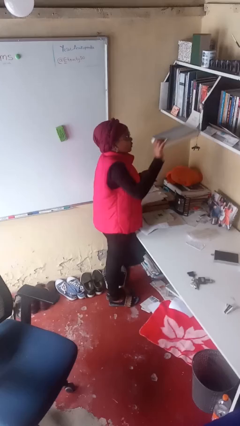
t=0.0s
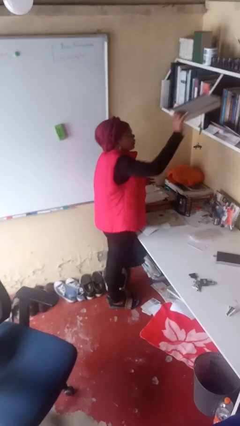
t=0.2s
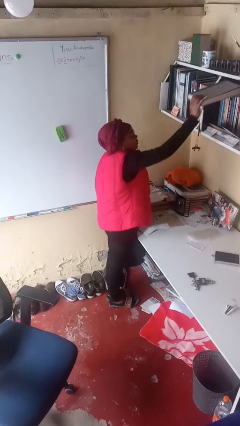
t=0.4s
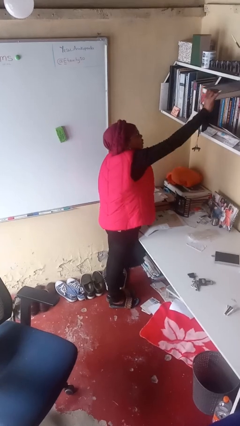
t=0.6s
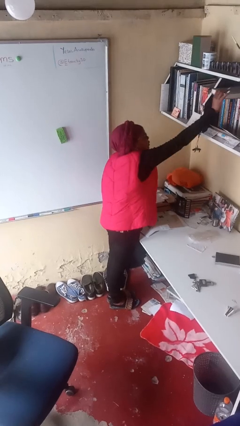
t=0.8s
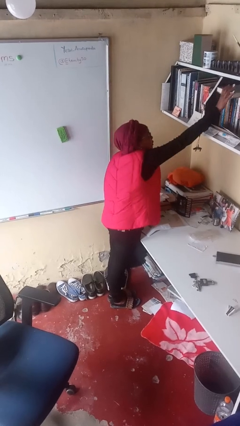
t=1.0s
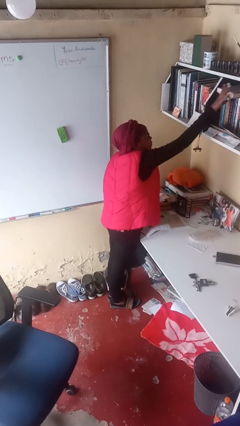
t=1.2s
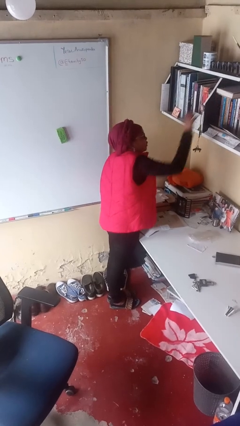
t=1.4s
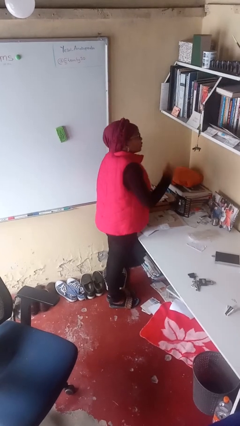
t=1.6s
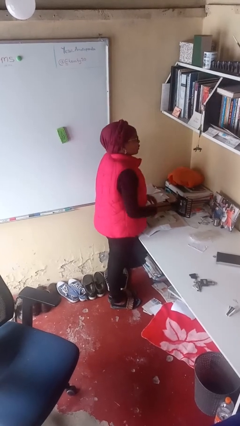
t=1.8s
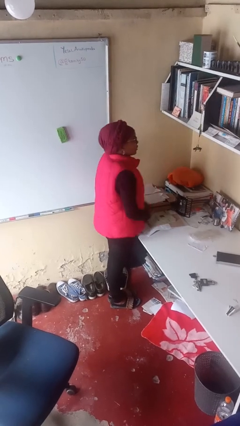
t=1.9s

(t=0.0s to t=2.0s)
person puts down object on shelf

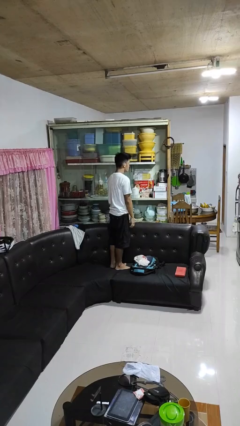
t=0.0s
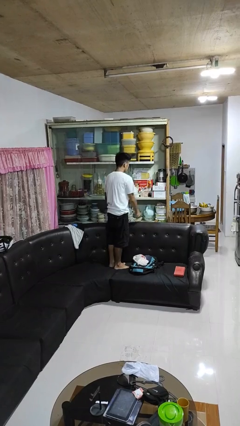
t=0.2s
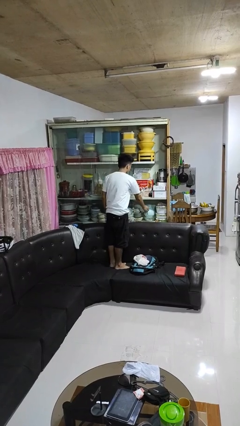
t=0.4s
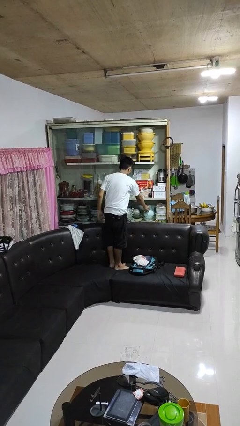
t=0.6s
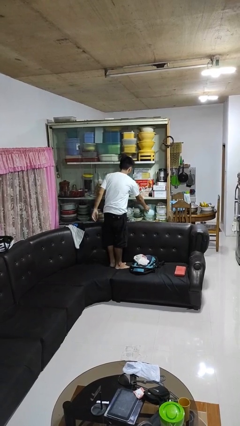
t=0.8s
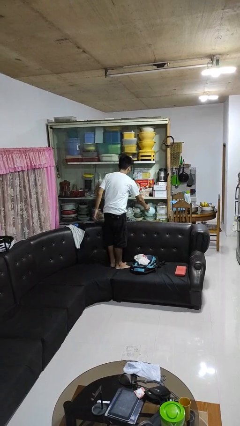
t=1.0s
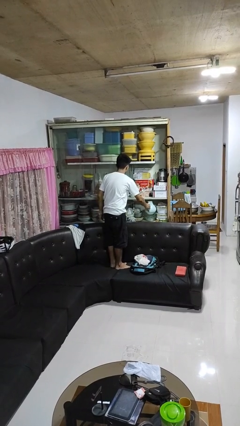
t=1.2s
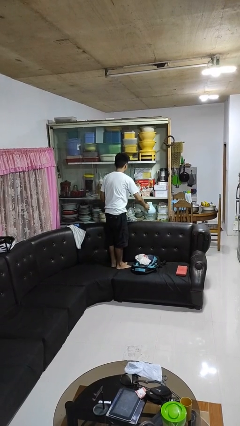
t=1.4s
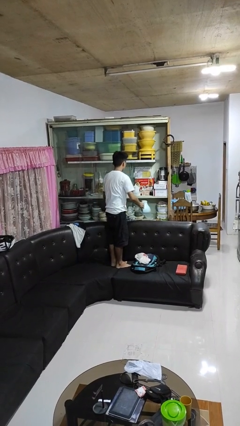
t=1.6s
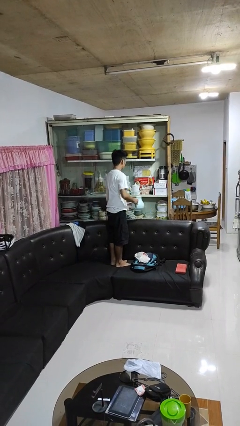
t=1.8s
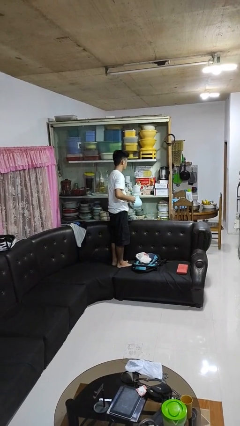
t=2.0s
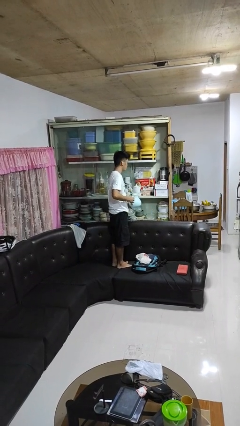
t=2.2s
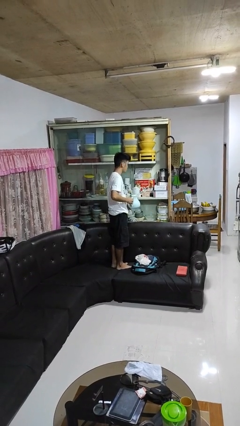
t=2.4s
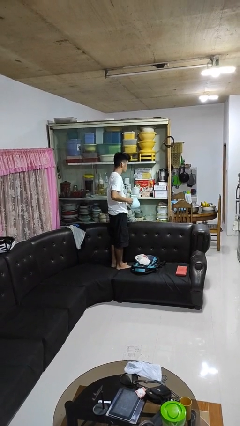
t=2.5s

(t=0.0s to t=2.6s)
person picks up object from cabinet

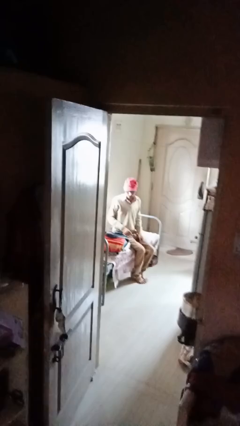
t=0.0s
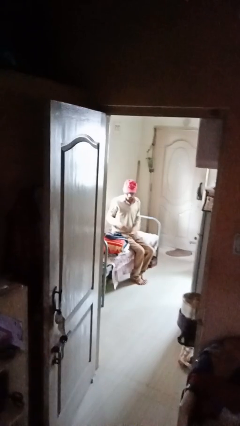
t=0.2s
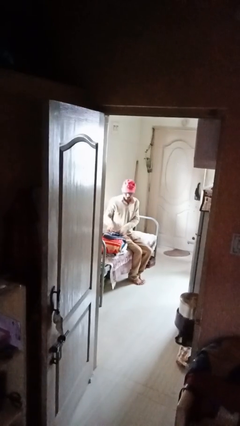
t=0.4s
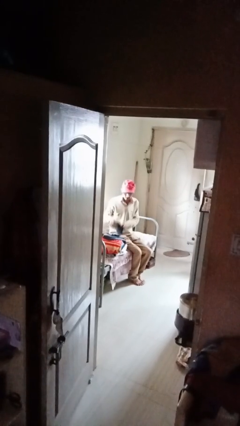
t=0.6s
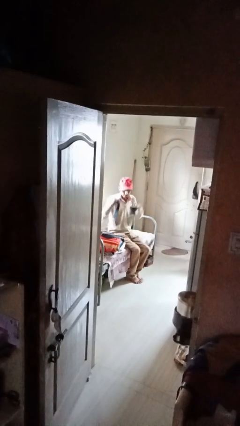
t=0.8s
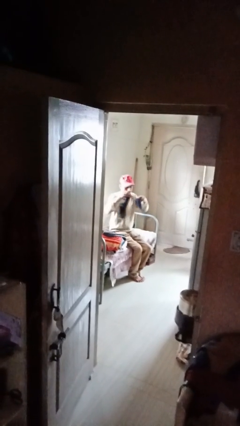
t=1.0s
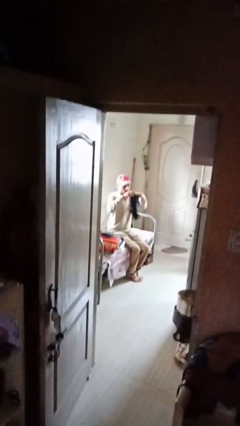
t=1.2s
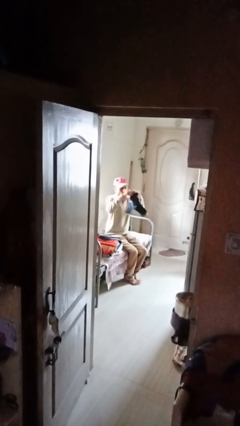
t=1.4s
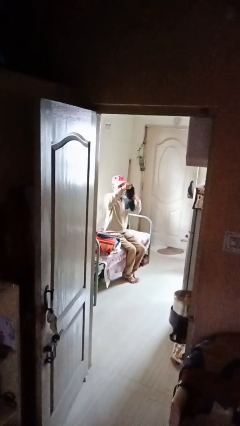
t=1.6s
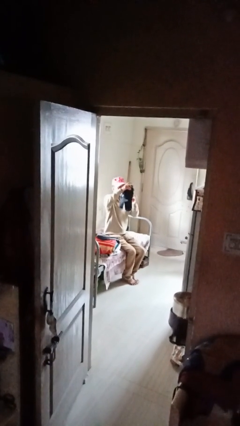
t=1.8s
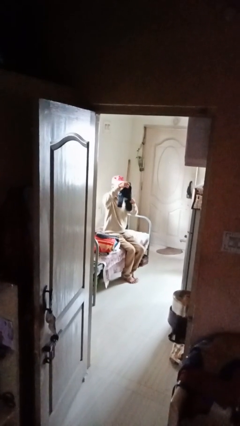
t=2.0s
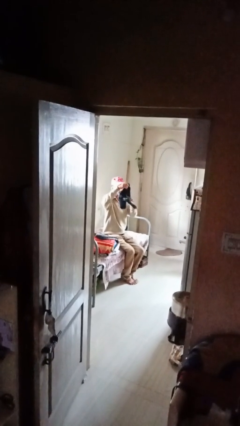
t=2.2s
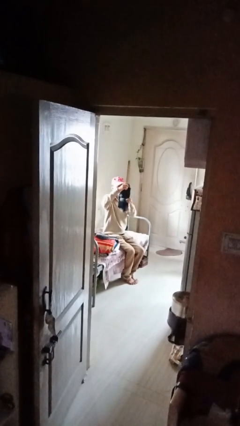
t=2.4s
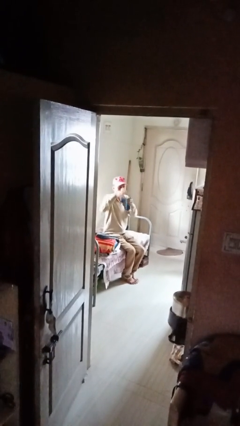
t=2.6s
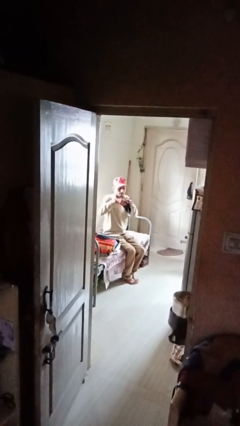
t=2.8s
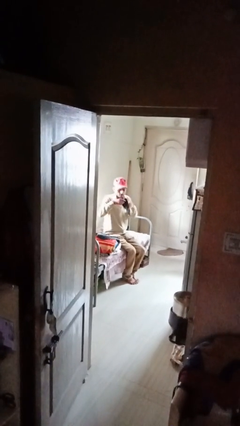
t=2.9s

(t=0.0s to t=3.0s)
person folds socks

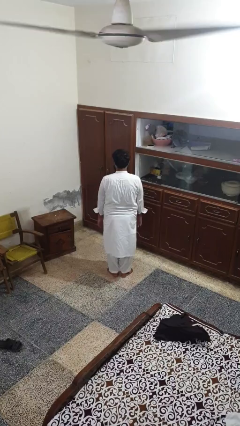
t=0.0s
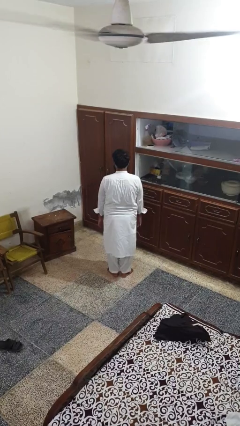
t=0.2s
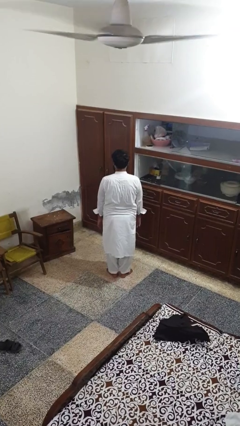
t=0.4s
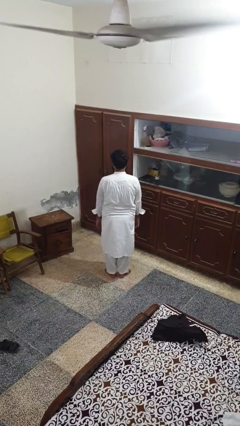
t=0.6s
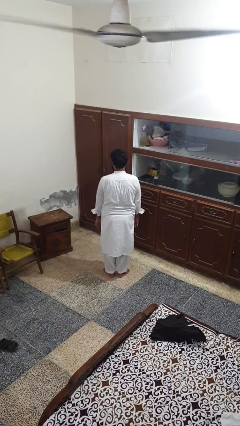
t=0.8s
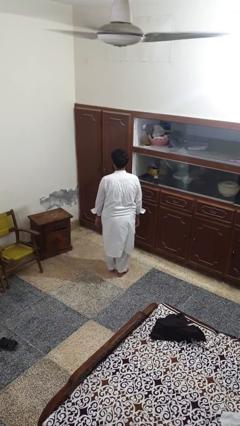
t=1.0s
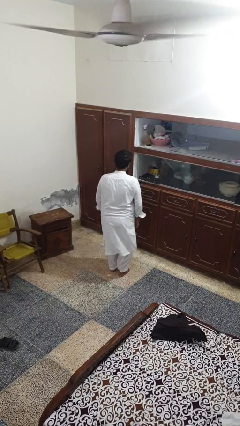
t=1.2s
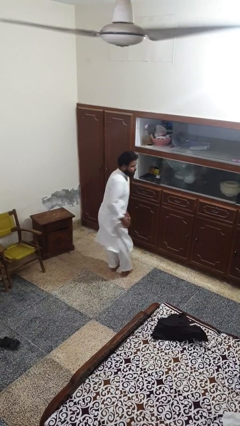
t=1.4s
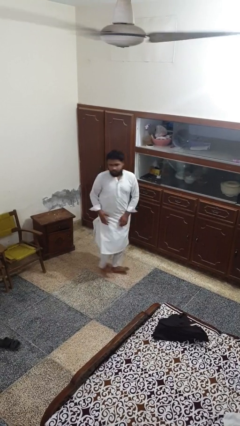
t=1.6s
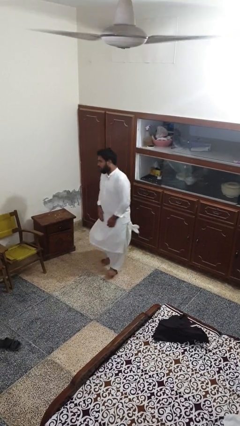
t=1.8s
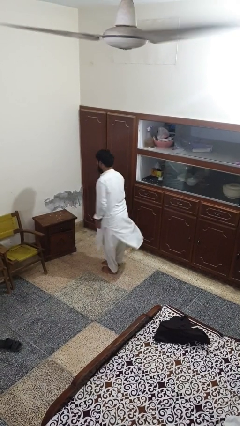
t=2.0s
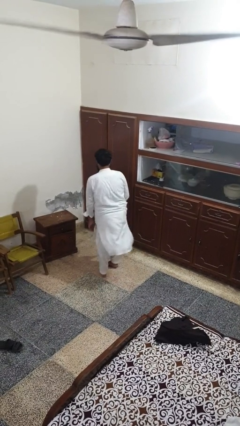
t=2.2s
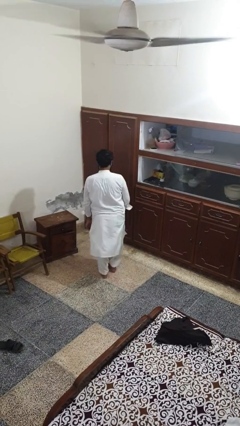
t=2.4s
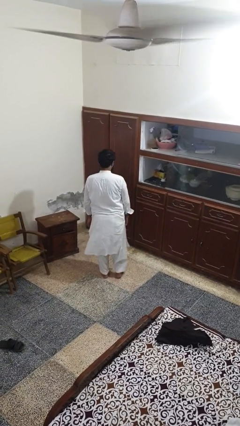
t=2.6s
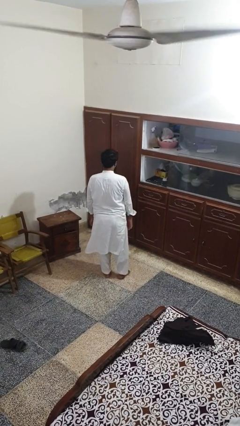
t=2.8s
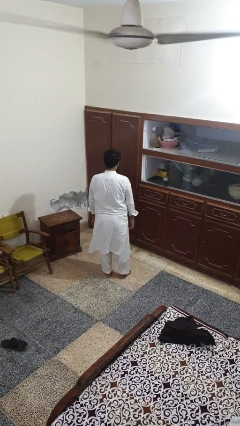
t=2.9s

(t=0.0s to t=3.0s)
person twirls

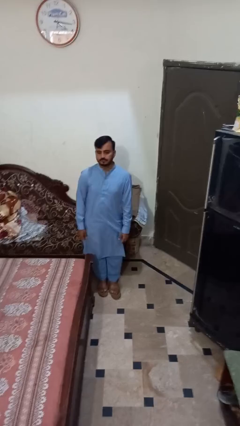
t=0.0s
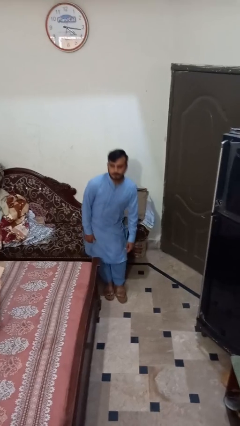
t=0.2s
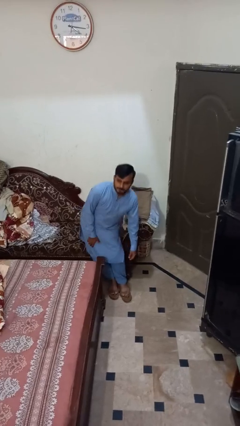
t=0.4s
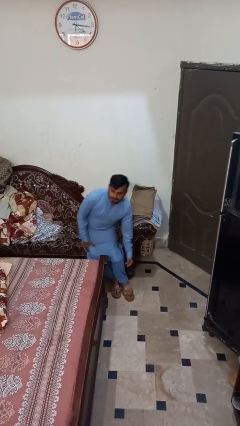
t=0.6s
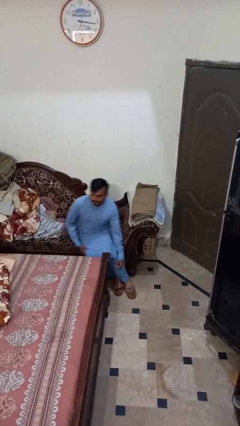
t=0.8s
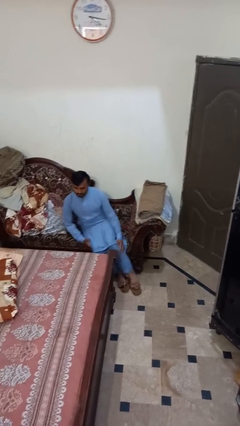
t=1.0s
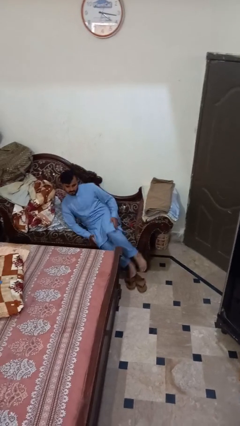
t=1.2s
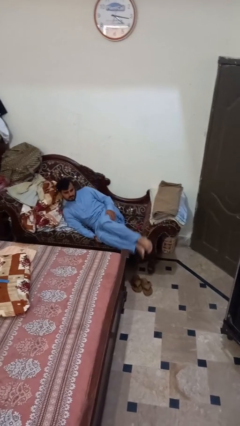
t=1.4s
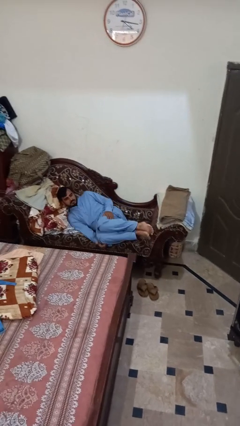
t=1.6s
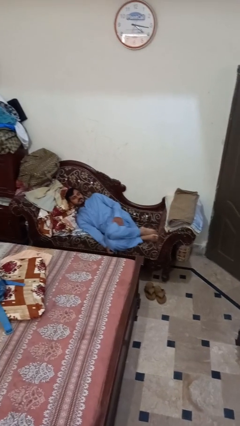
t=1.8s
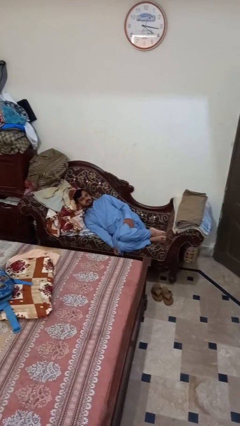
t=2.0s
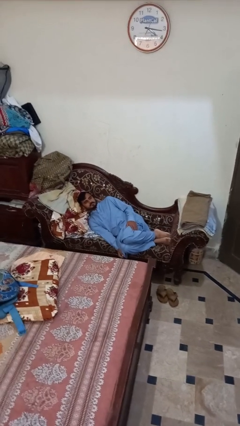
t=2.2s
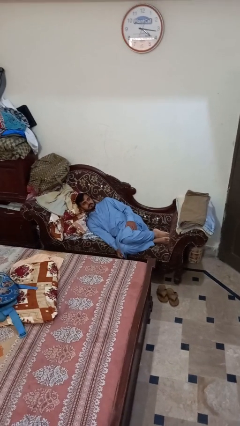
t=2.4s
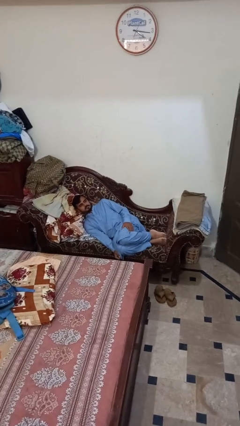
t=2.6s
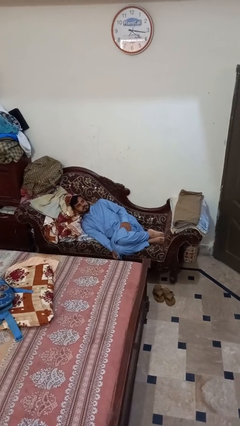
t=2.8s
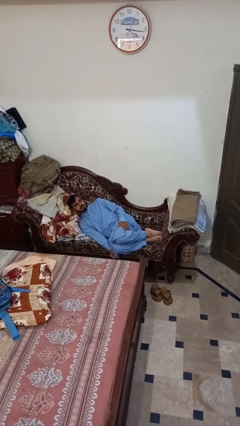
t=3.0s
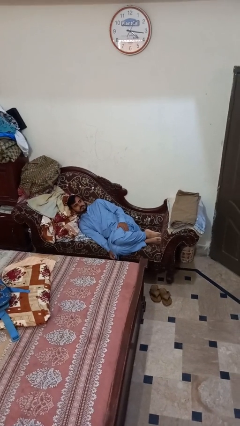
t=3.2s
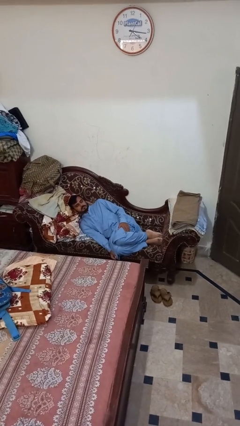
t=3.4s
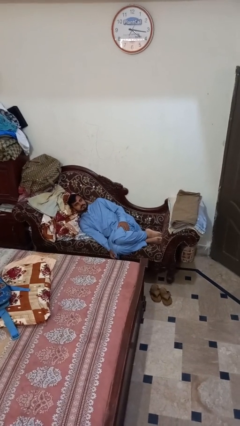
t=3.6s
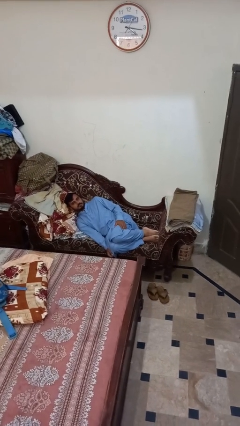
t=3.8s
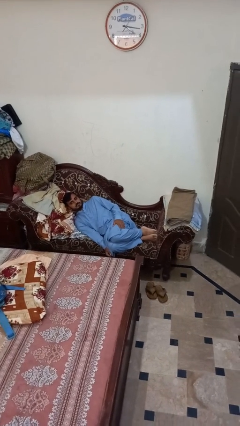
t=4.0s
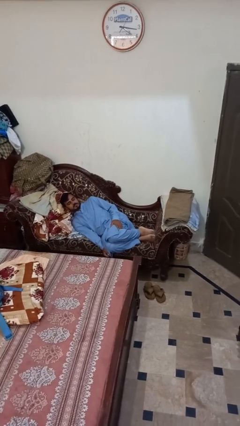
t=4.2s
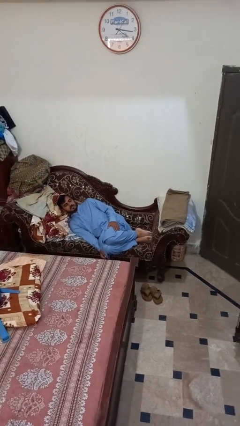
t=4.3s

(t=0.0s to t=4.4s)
person lies down on couch

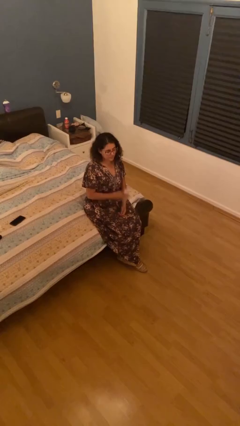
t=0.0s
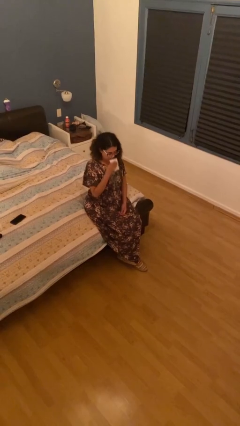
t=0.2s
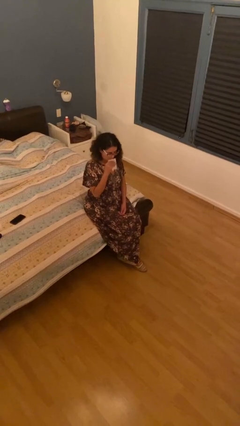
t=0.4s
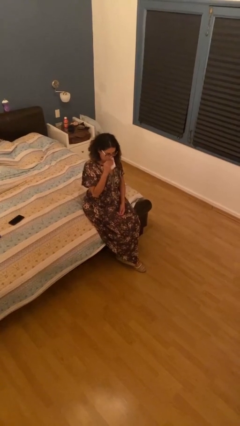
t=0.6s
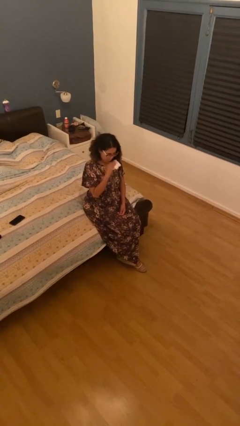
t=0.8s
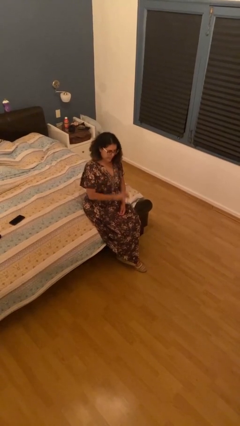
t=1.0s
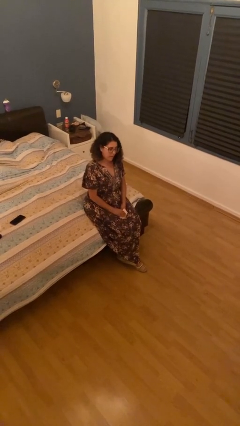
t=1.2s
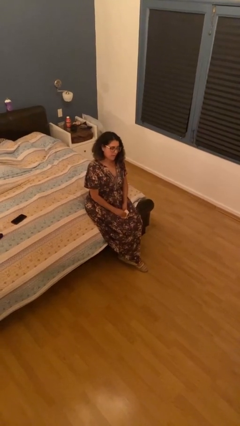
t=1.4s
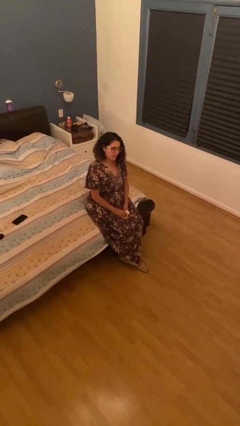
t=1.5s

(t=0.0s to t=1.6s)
person wipes mouth with napkin

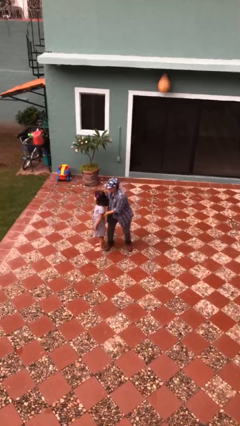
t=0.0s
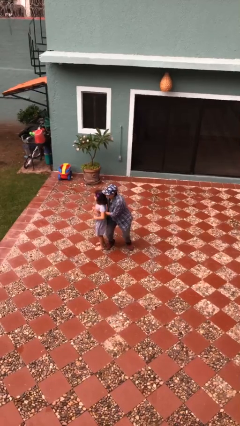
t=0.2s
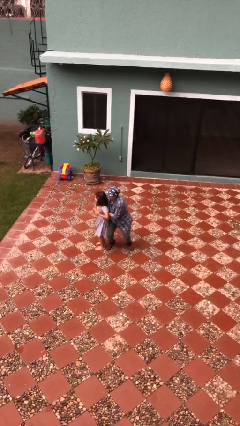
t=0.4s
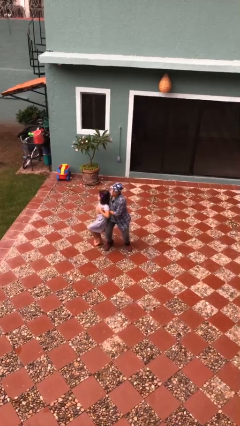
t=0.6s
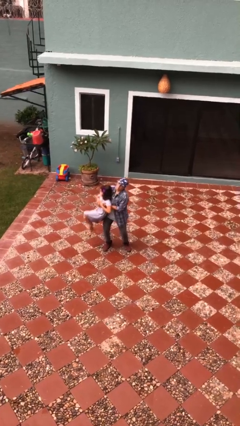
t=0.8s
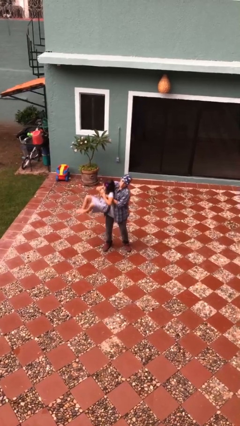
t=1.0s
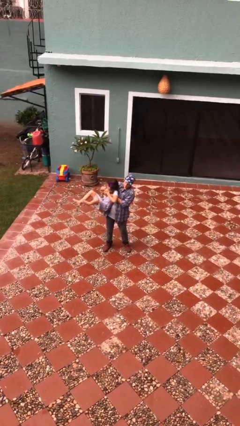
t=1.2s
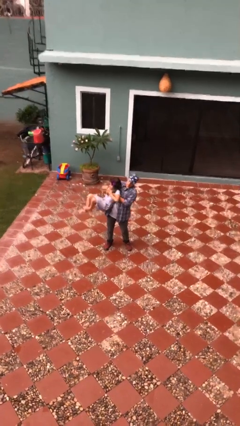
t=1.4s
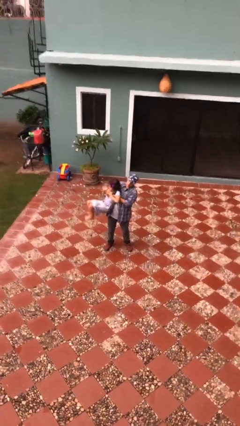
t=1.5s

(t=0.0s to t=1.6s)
person picks up person
